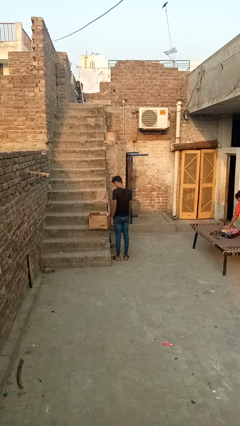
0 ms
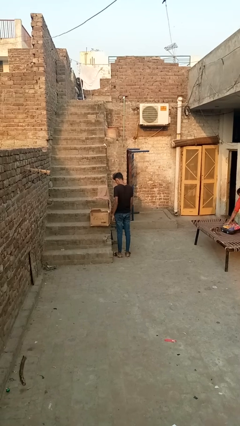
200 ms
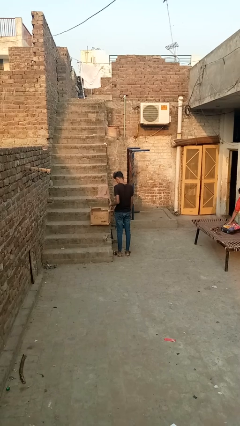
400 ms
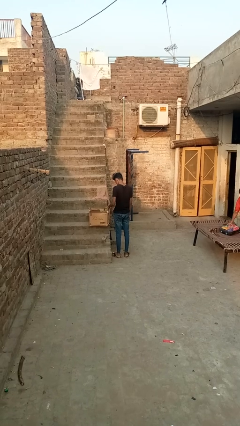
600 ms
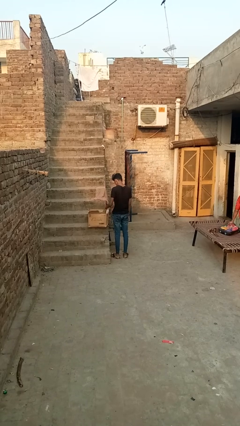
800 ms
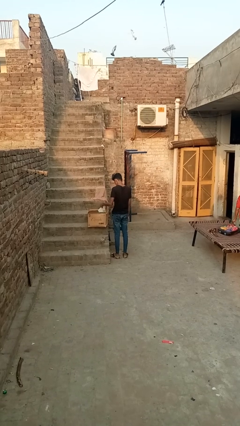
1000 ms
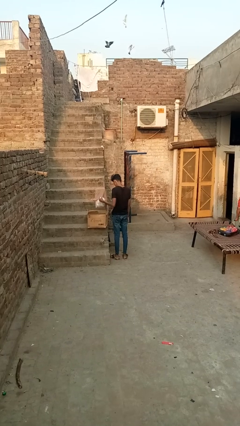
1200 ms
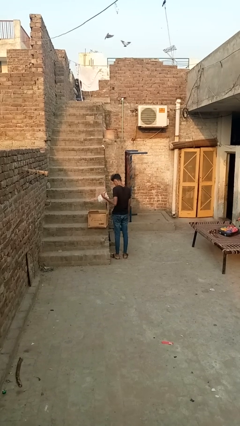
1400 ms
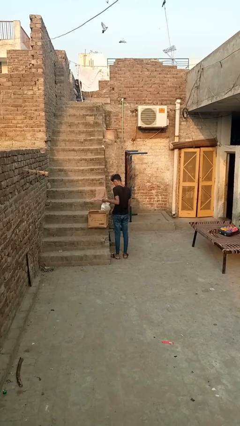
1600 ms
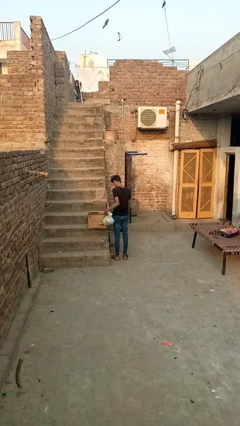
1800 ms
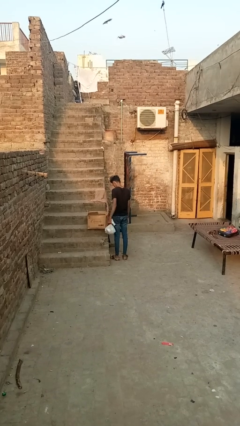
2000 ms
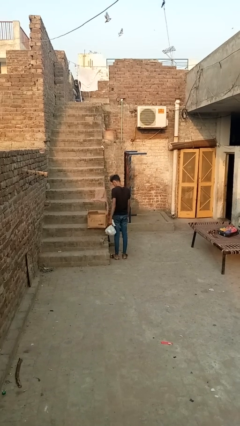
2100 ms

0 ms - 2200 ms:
person takes object from box

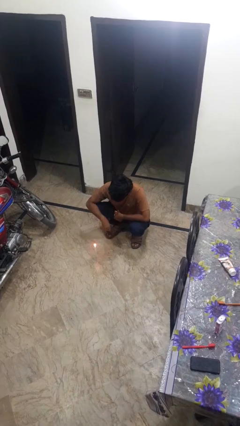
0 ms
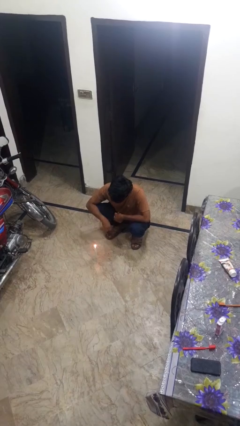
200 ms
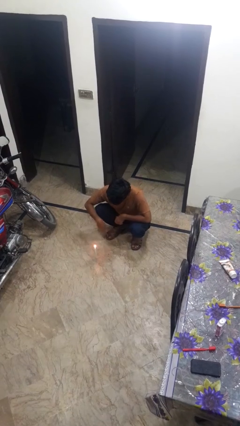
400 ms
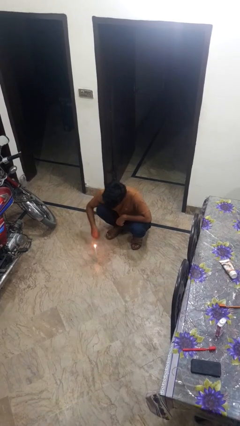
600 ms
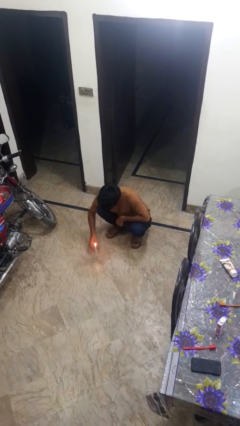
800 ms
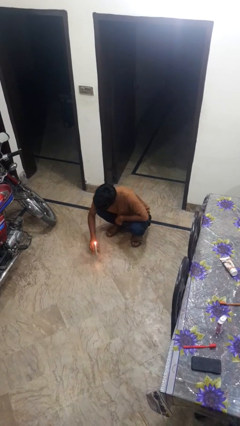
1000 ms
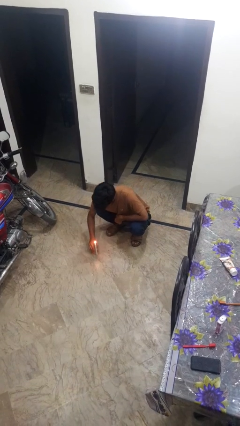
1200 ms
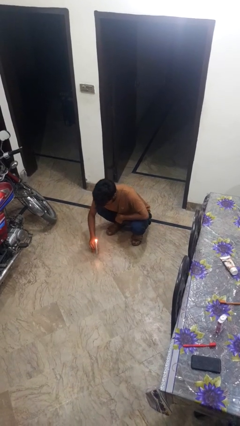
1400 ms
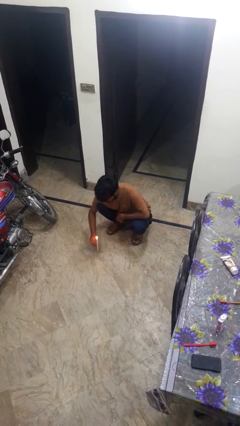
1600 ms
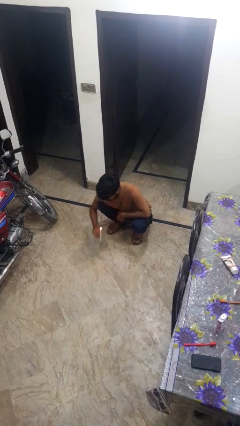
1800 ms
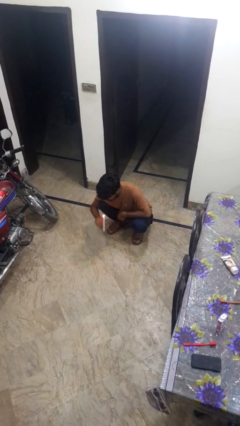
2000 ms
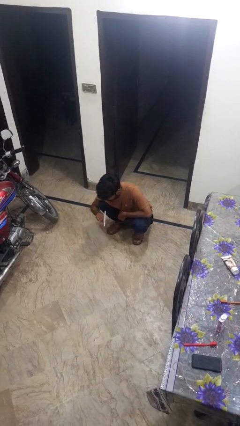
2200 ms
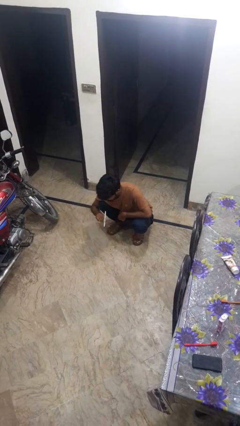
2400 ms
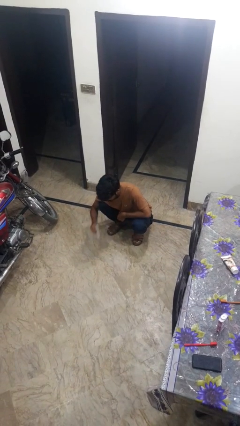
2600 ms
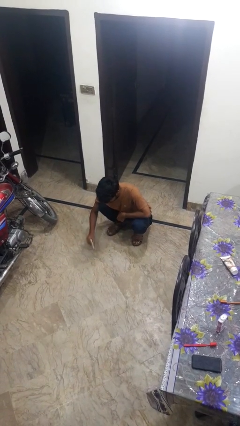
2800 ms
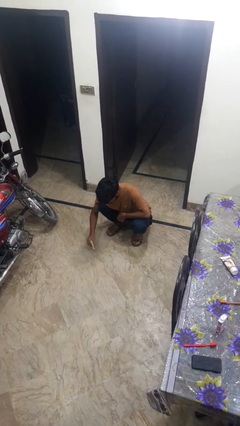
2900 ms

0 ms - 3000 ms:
person extinguishes candle

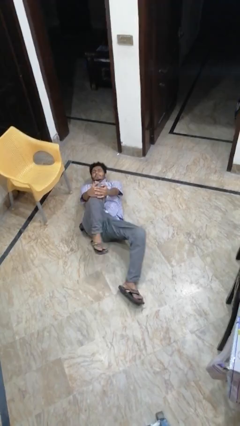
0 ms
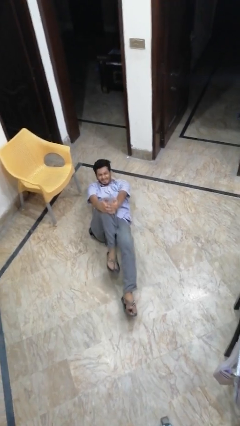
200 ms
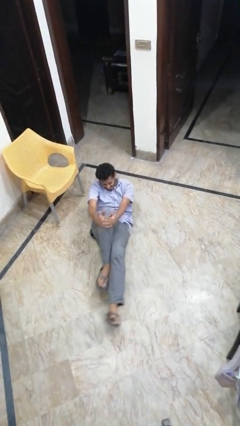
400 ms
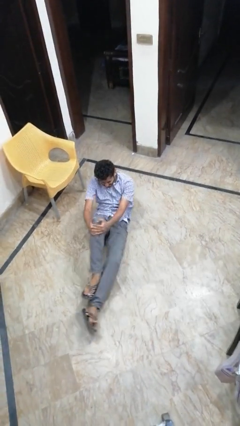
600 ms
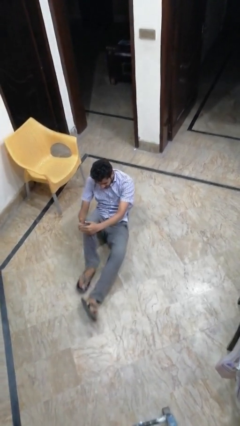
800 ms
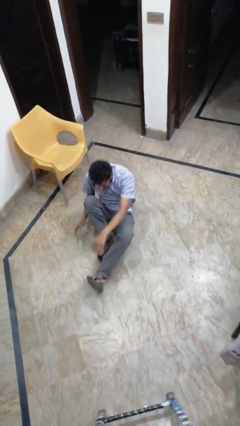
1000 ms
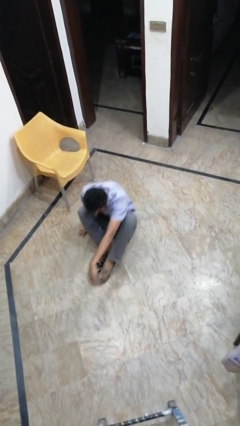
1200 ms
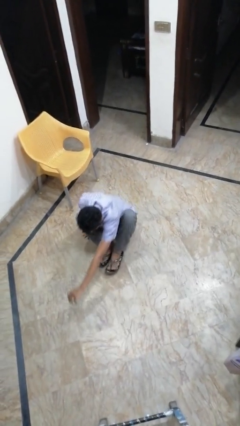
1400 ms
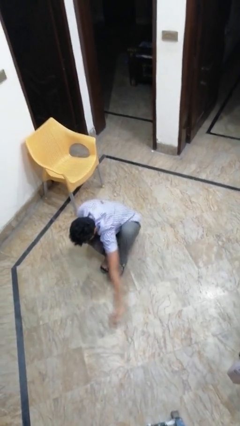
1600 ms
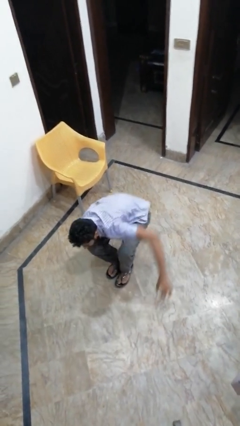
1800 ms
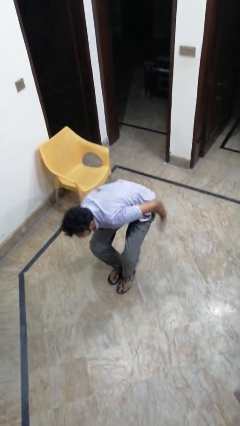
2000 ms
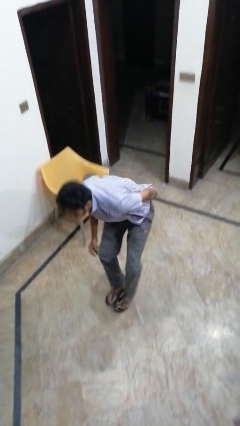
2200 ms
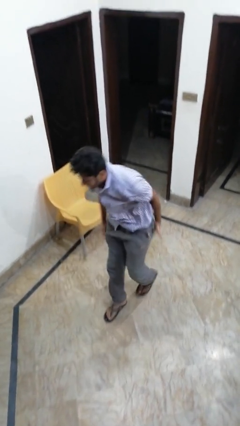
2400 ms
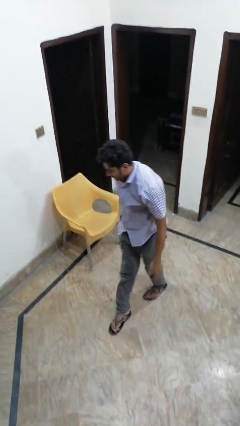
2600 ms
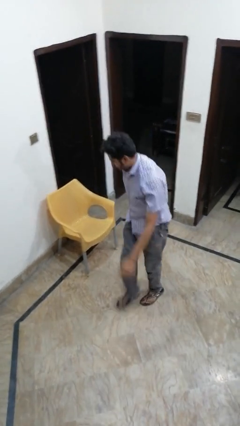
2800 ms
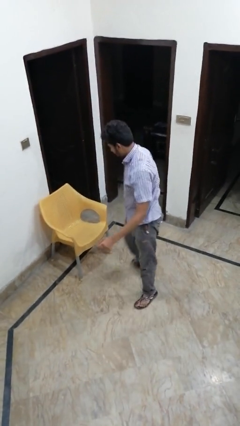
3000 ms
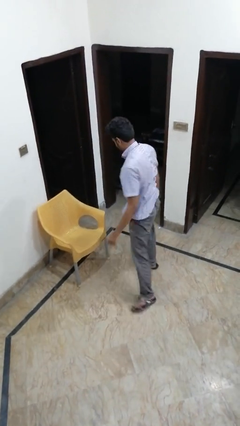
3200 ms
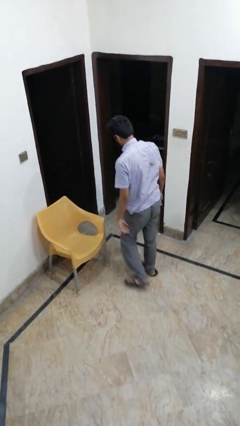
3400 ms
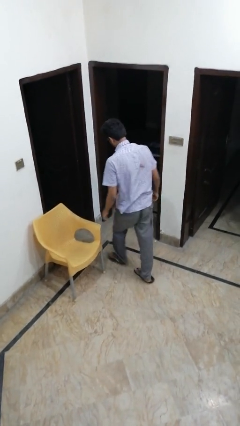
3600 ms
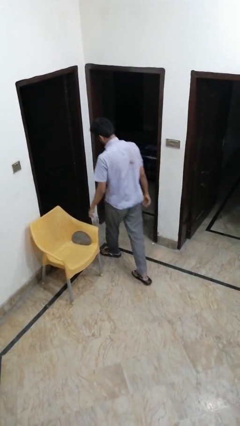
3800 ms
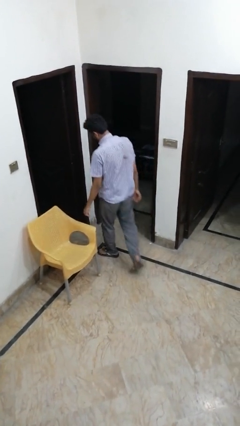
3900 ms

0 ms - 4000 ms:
person stands up from floor

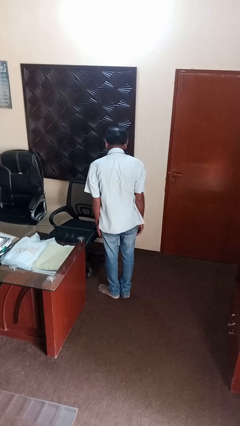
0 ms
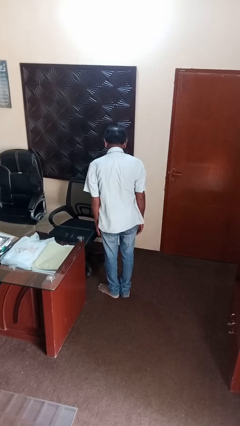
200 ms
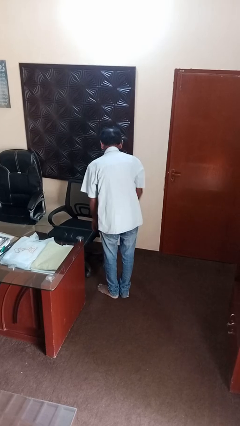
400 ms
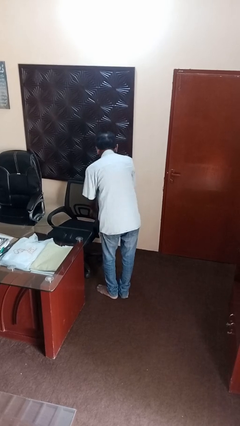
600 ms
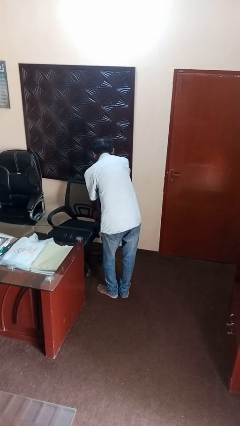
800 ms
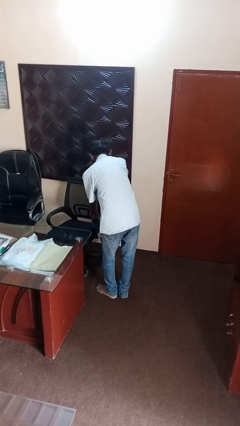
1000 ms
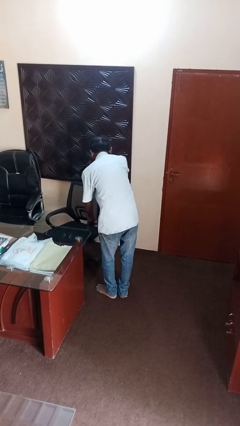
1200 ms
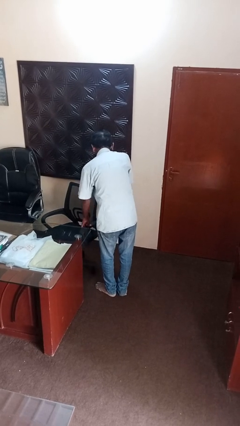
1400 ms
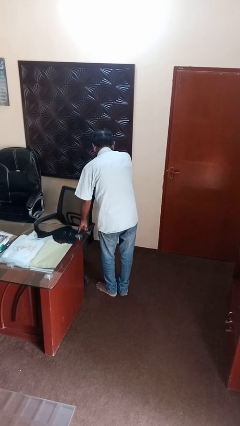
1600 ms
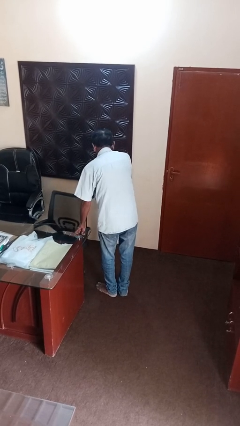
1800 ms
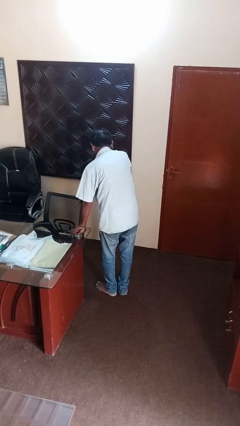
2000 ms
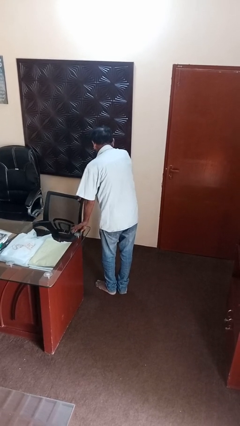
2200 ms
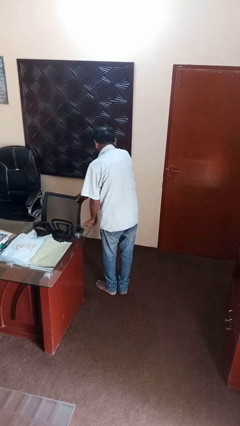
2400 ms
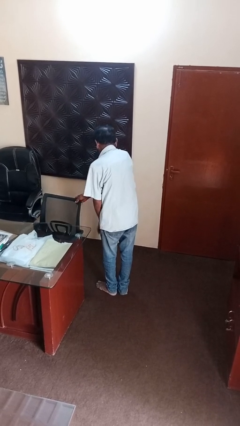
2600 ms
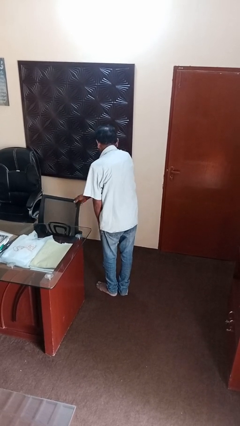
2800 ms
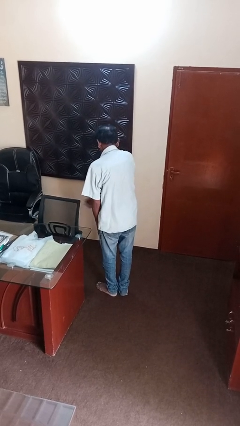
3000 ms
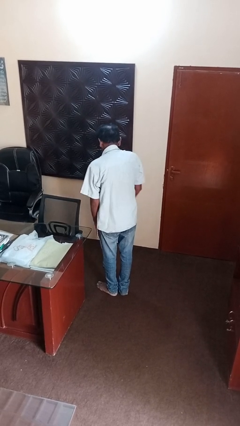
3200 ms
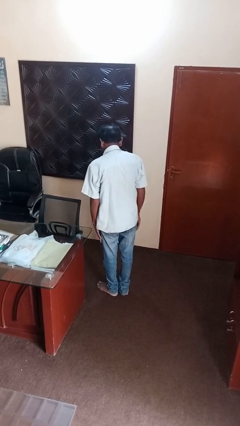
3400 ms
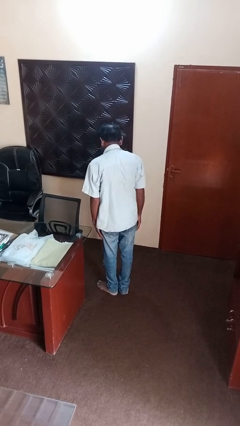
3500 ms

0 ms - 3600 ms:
person pushes in chair

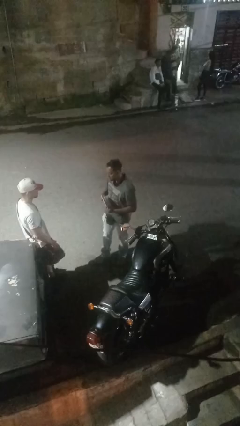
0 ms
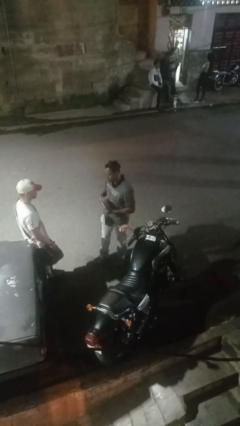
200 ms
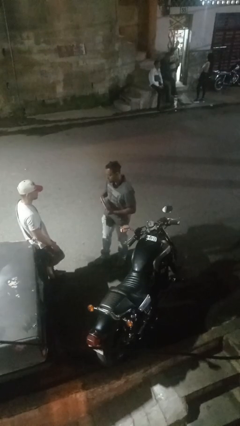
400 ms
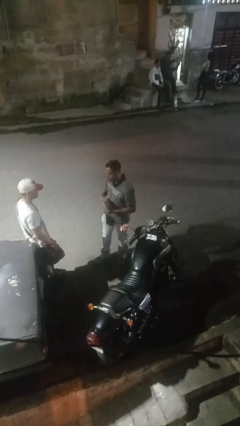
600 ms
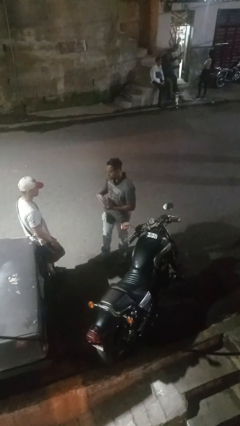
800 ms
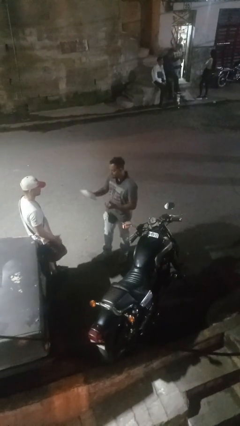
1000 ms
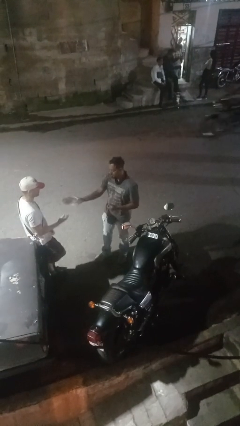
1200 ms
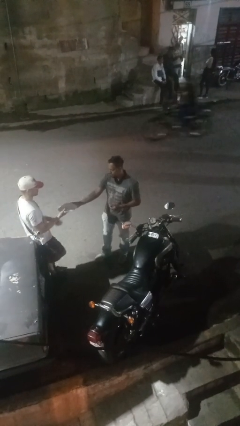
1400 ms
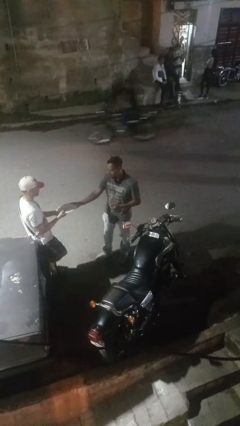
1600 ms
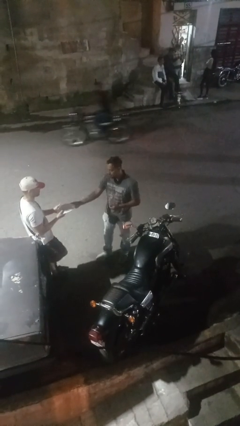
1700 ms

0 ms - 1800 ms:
person transfers object to person

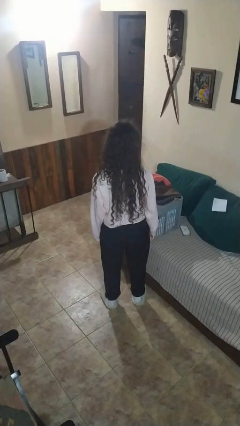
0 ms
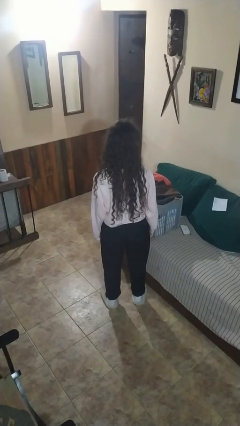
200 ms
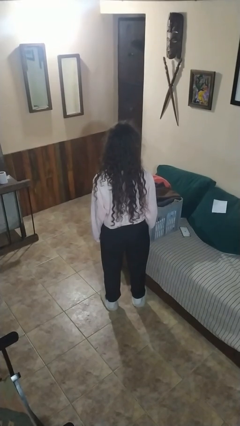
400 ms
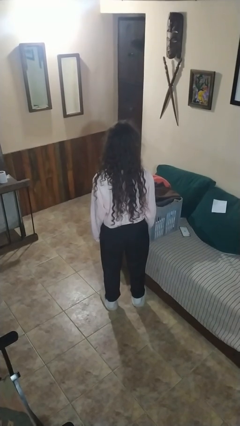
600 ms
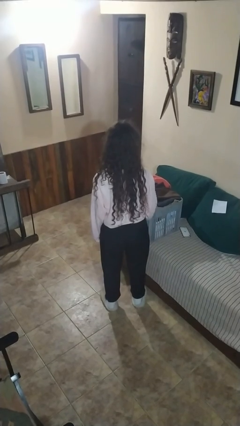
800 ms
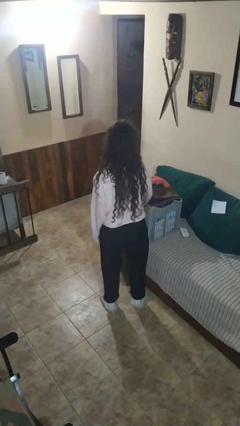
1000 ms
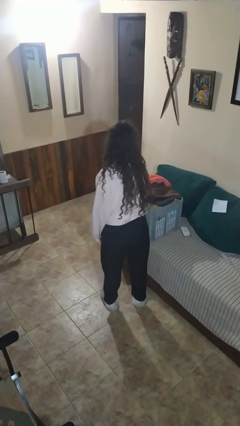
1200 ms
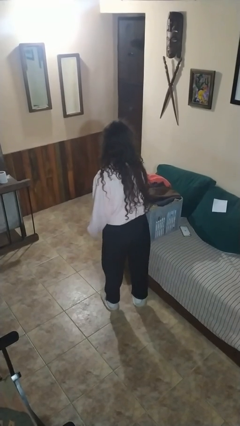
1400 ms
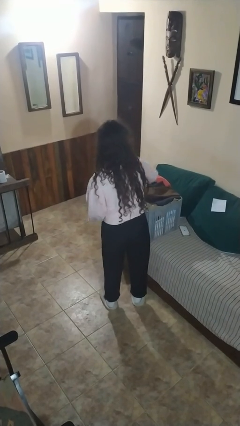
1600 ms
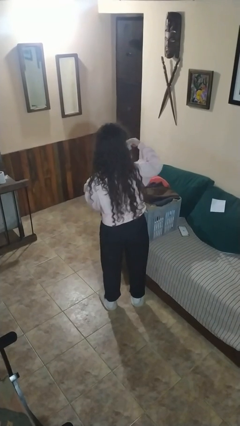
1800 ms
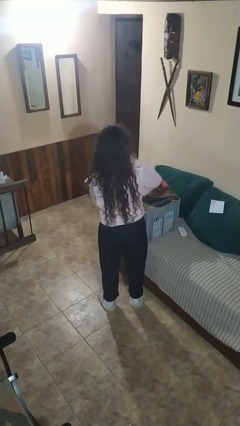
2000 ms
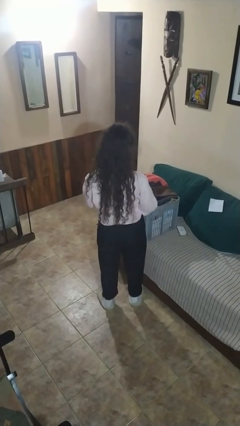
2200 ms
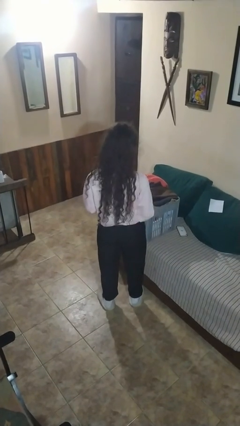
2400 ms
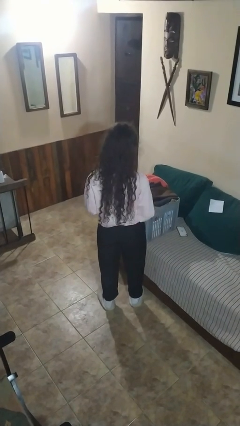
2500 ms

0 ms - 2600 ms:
person takes object from basket
